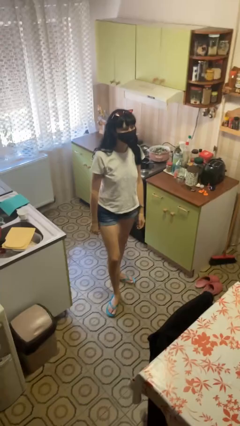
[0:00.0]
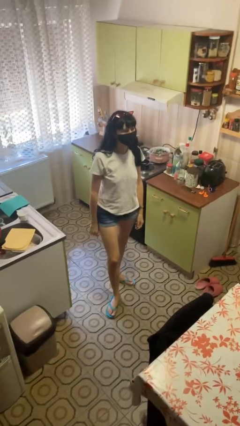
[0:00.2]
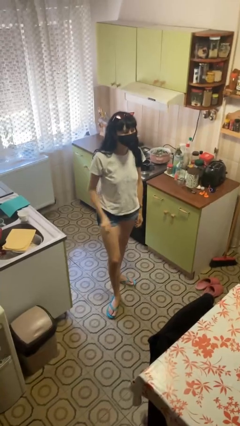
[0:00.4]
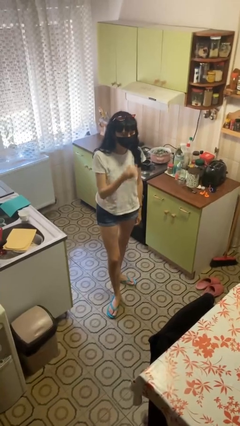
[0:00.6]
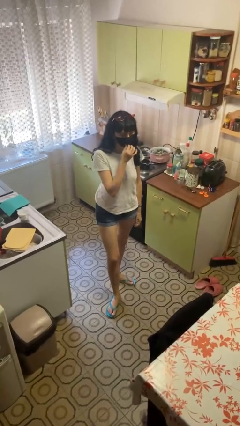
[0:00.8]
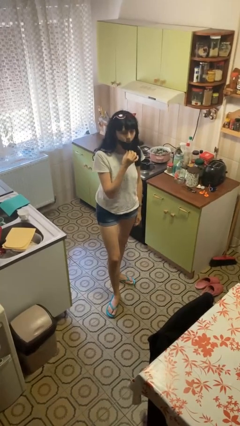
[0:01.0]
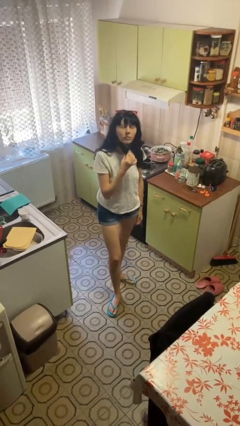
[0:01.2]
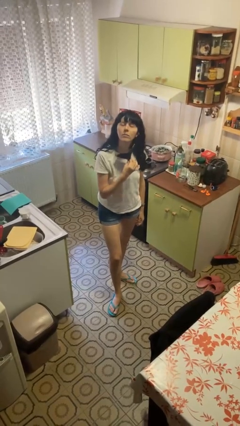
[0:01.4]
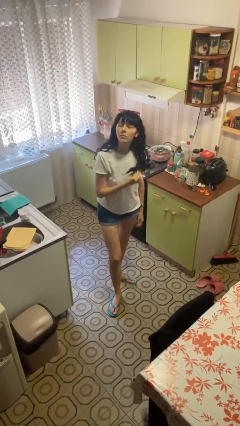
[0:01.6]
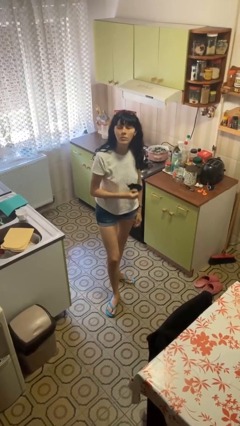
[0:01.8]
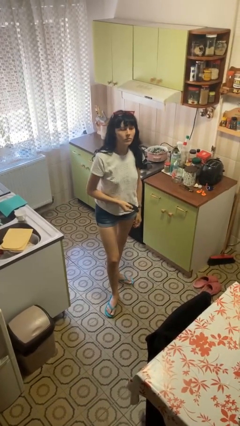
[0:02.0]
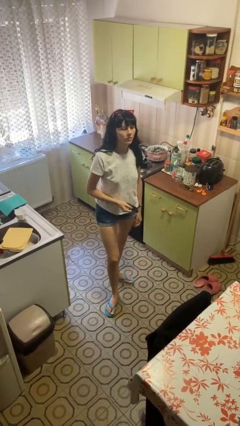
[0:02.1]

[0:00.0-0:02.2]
person takes off facemask

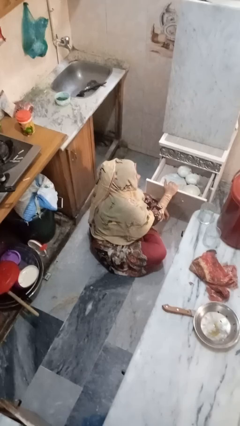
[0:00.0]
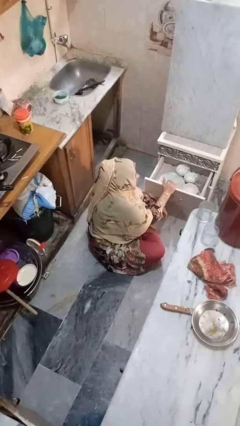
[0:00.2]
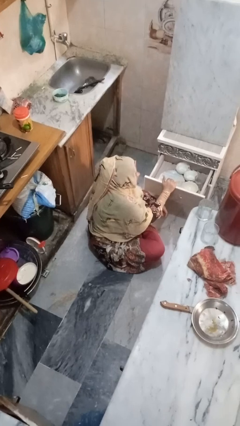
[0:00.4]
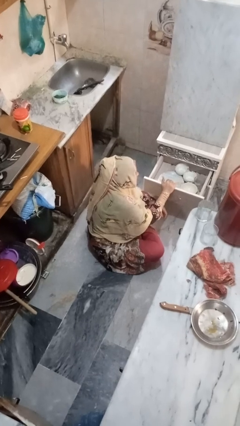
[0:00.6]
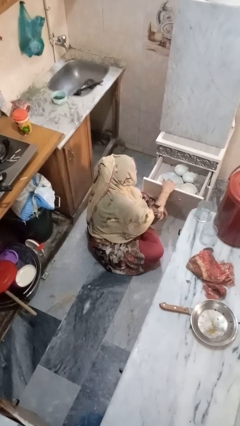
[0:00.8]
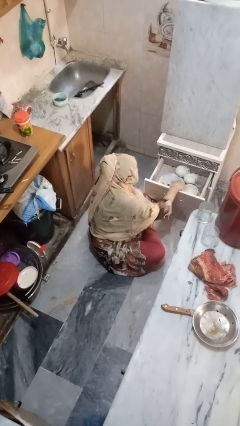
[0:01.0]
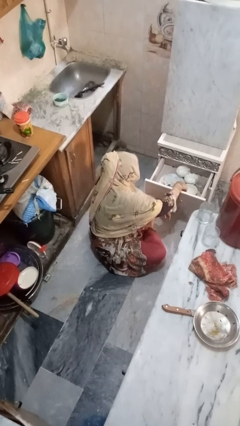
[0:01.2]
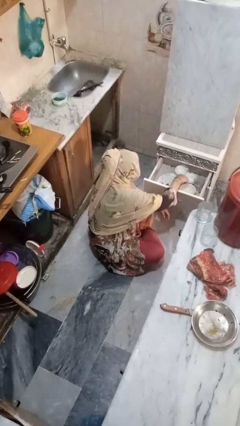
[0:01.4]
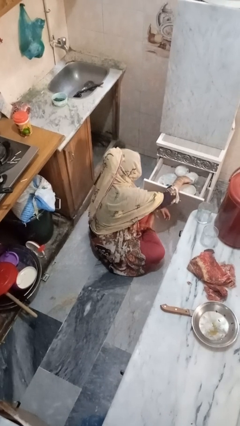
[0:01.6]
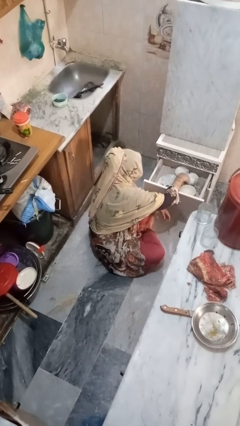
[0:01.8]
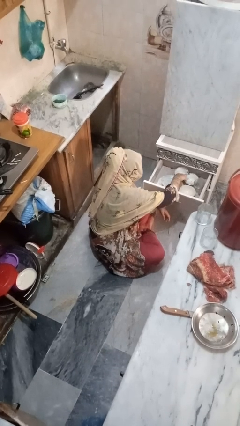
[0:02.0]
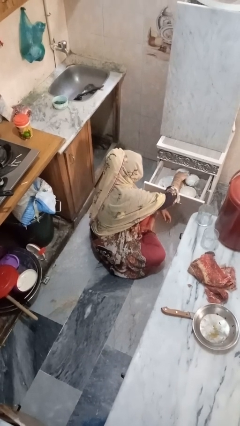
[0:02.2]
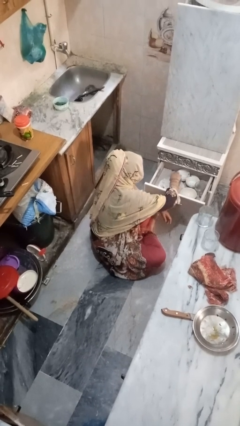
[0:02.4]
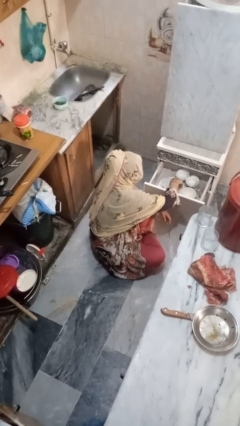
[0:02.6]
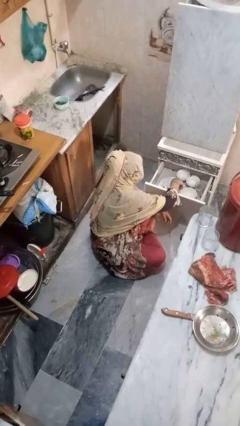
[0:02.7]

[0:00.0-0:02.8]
person searches in kitchen drawer

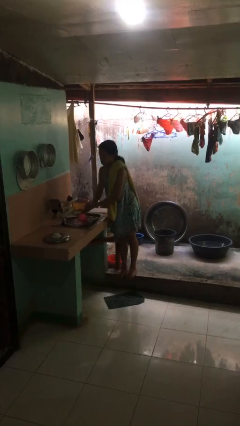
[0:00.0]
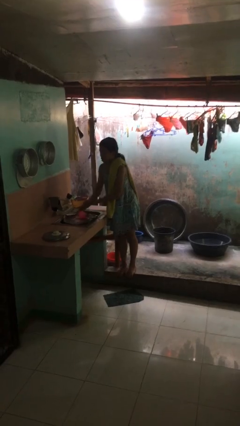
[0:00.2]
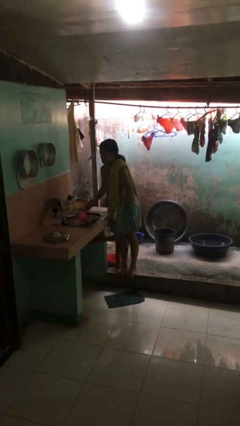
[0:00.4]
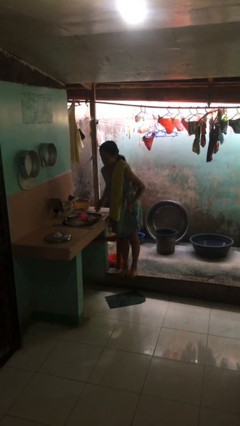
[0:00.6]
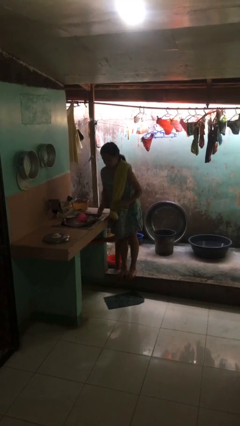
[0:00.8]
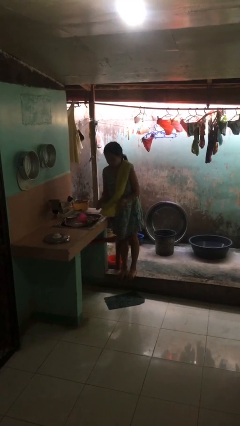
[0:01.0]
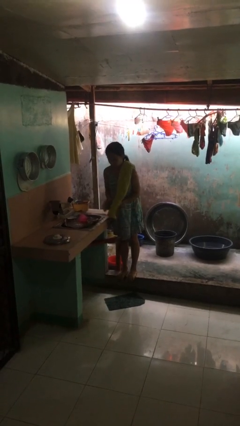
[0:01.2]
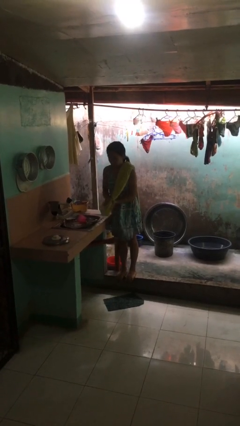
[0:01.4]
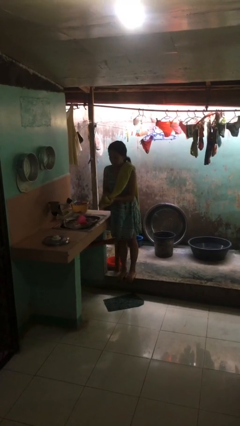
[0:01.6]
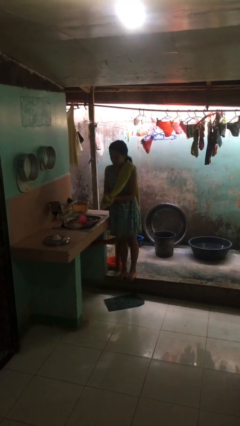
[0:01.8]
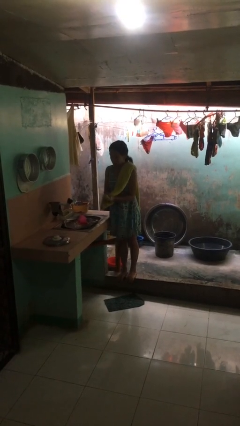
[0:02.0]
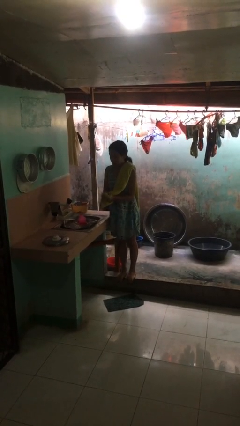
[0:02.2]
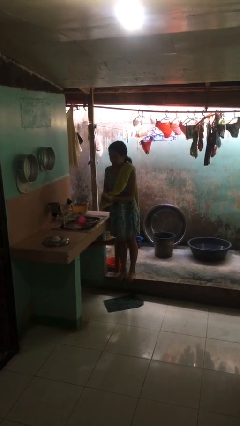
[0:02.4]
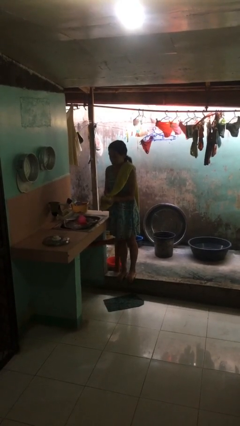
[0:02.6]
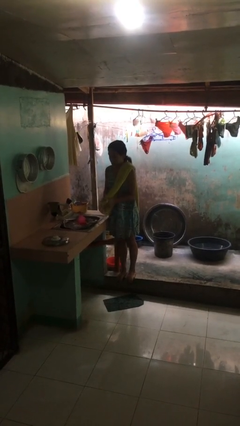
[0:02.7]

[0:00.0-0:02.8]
person dries hands with towel

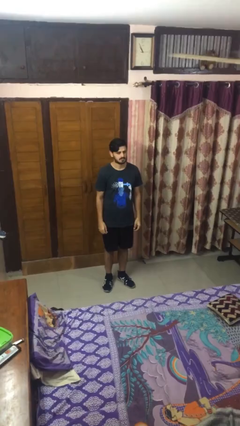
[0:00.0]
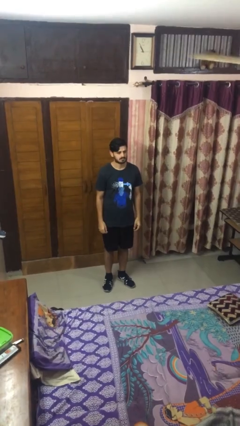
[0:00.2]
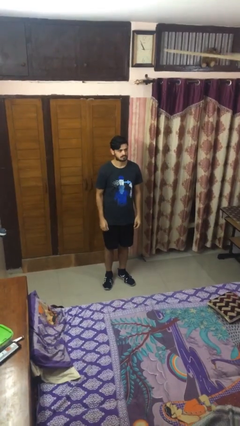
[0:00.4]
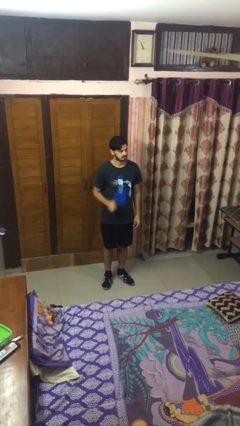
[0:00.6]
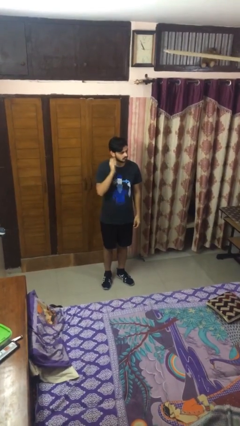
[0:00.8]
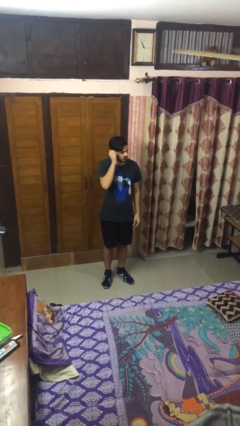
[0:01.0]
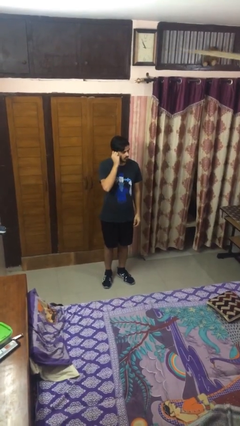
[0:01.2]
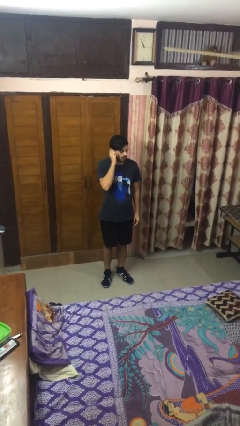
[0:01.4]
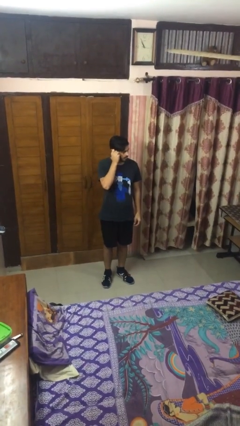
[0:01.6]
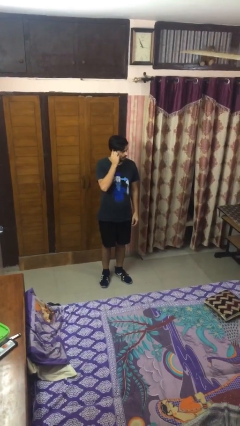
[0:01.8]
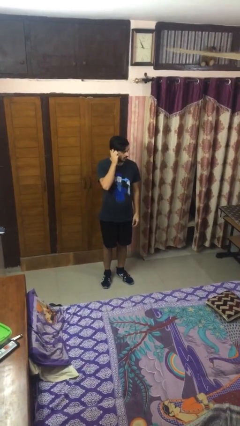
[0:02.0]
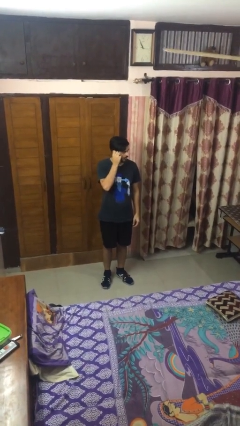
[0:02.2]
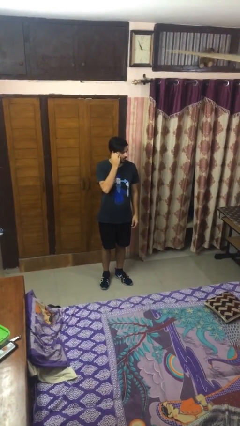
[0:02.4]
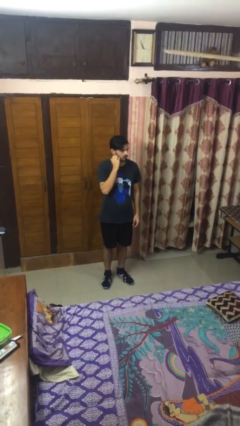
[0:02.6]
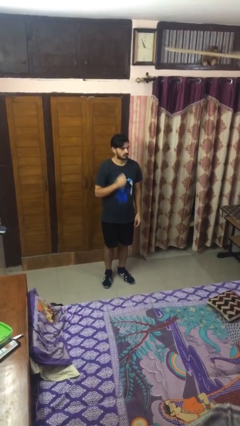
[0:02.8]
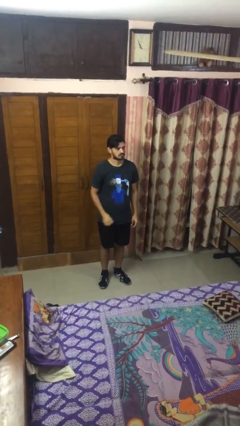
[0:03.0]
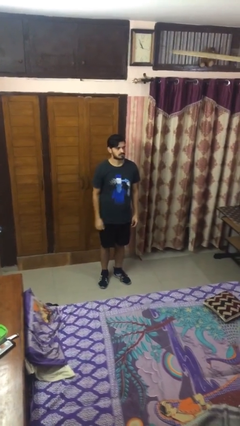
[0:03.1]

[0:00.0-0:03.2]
person touches earlobe

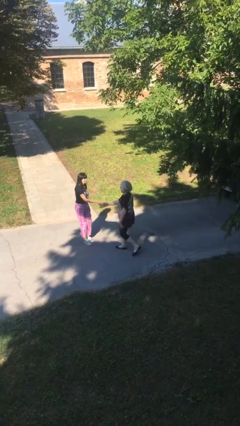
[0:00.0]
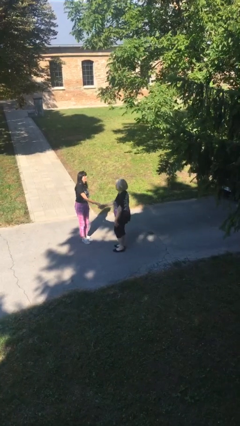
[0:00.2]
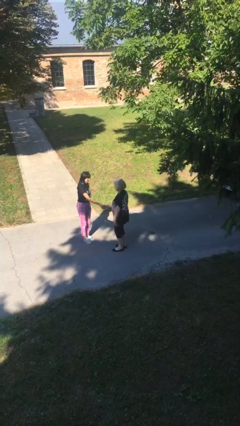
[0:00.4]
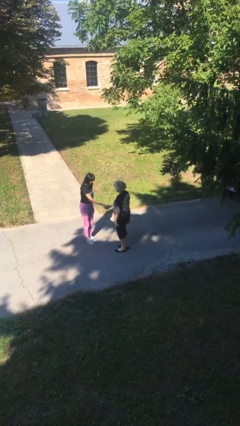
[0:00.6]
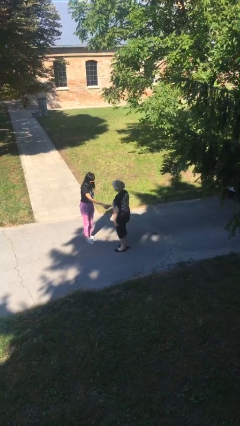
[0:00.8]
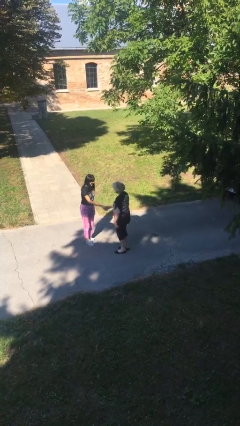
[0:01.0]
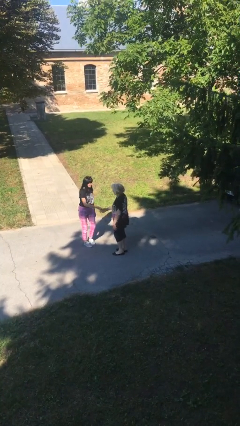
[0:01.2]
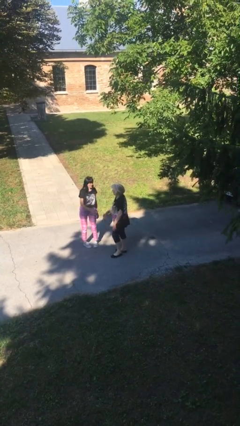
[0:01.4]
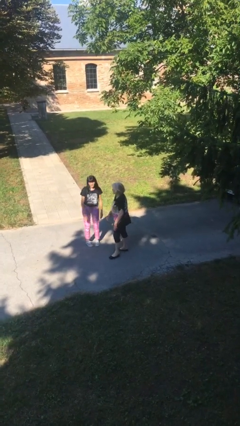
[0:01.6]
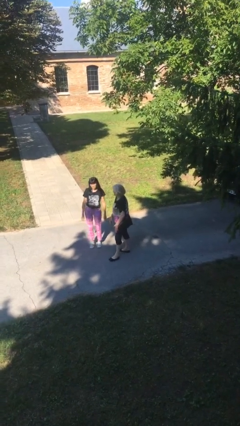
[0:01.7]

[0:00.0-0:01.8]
person shakes hand

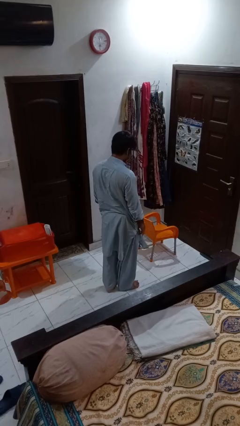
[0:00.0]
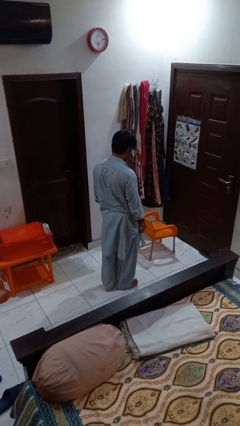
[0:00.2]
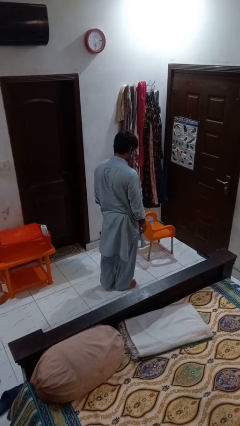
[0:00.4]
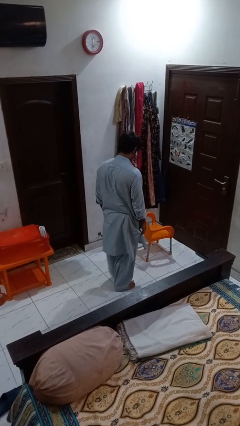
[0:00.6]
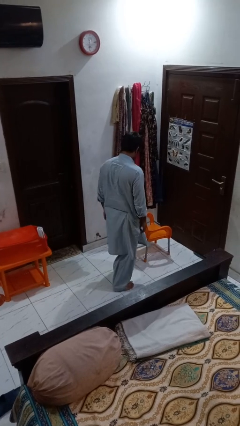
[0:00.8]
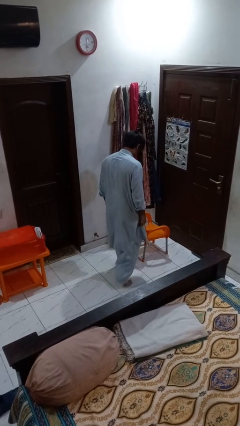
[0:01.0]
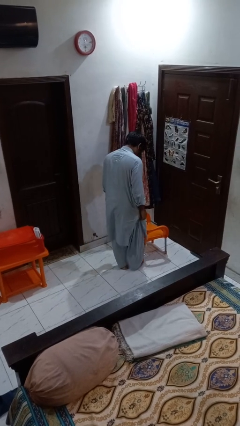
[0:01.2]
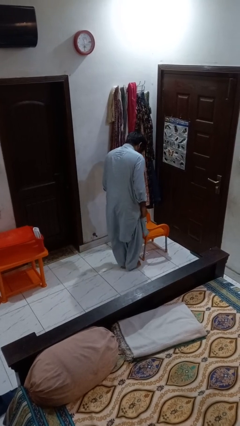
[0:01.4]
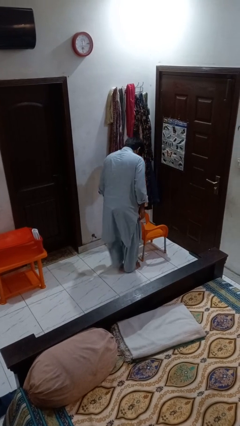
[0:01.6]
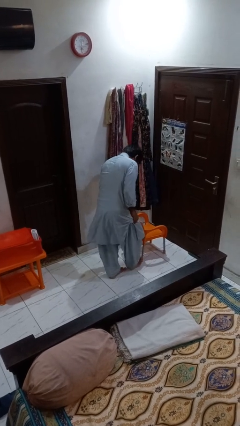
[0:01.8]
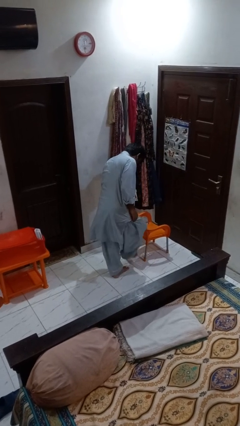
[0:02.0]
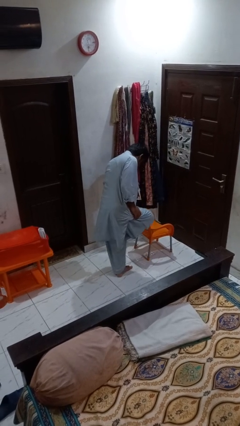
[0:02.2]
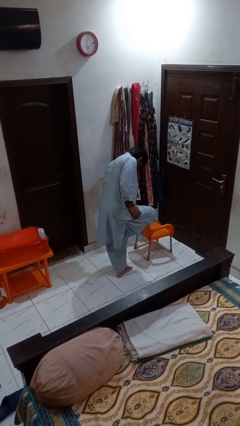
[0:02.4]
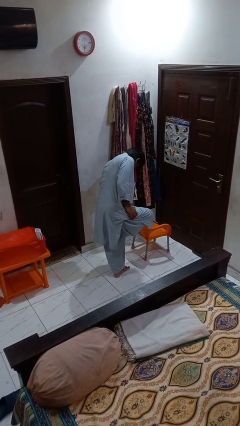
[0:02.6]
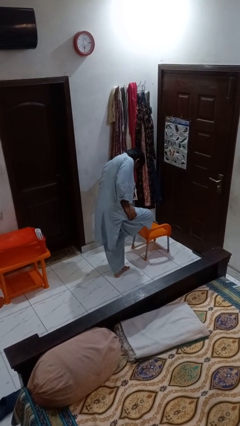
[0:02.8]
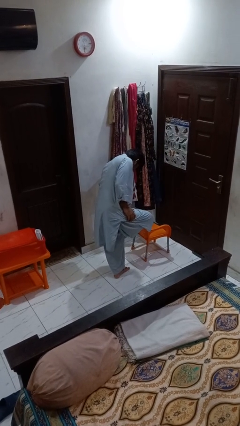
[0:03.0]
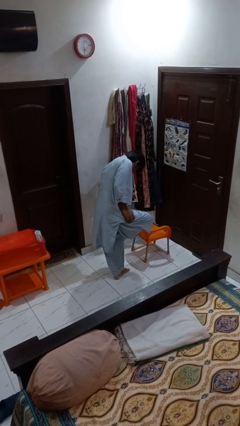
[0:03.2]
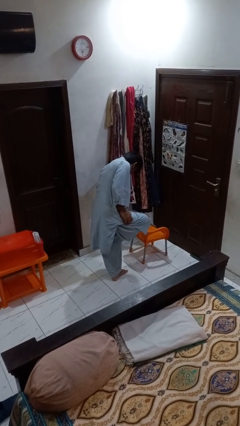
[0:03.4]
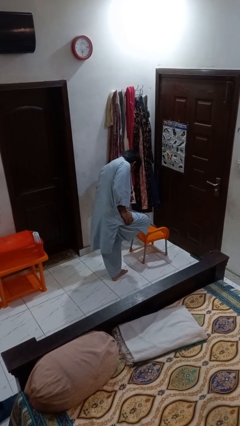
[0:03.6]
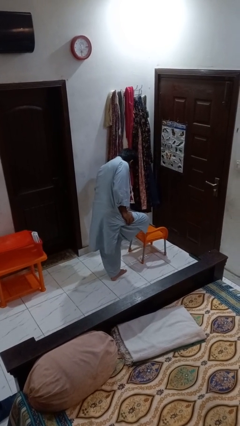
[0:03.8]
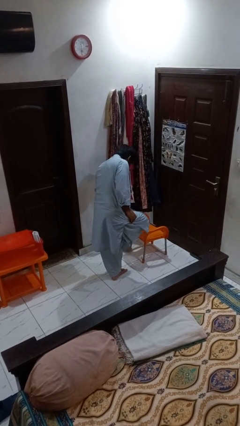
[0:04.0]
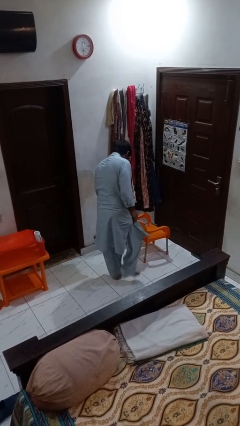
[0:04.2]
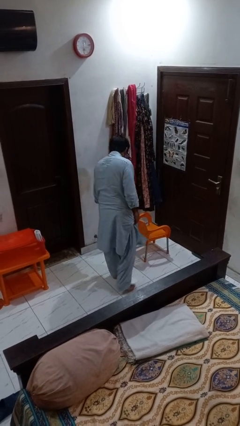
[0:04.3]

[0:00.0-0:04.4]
person stubs toe

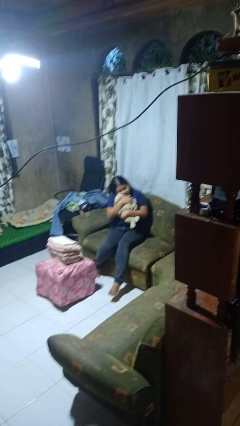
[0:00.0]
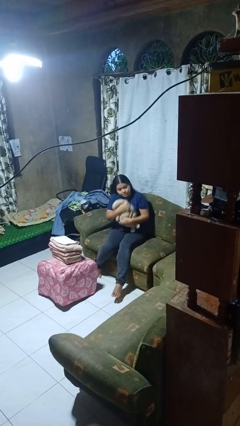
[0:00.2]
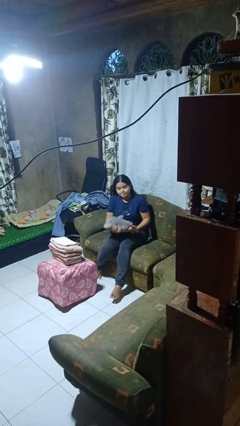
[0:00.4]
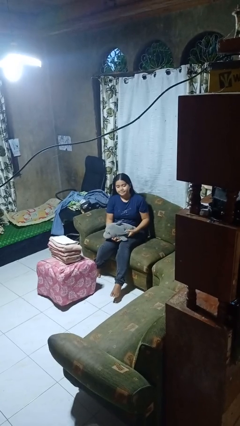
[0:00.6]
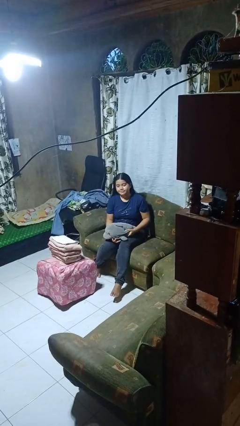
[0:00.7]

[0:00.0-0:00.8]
person hugs stuffed animal
